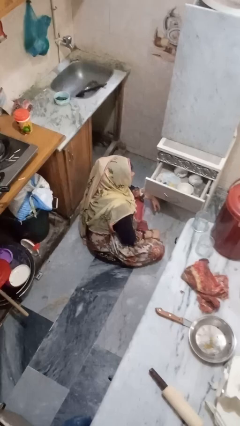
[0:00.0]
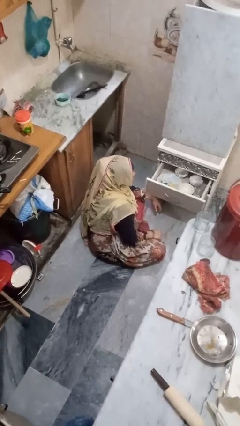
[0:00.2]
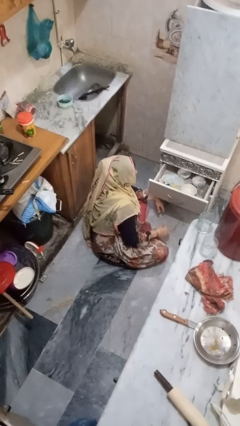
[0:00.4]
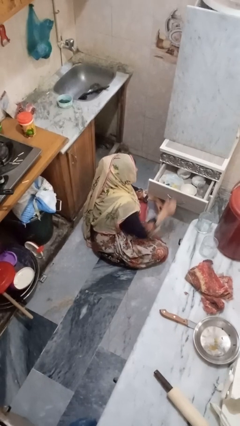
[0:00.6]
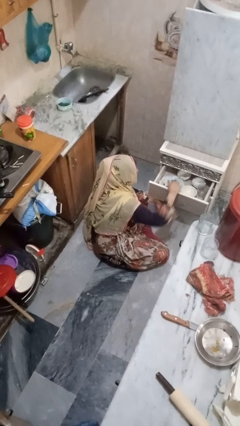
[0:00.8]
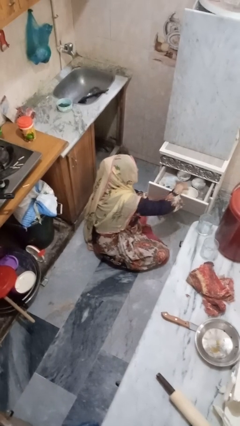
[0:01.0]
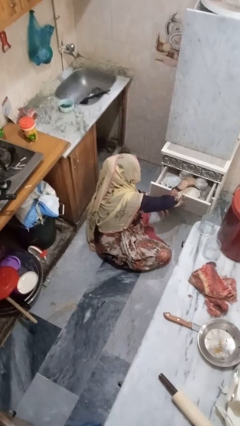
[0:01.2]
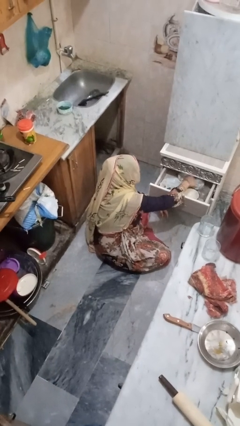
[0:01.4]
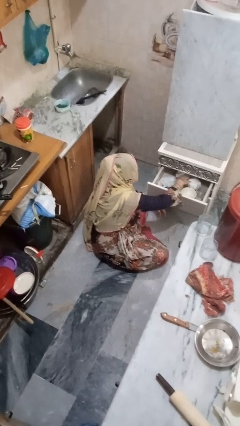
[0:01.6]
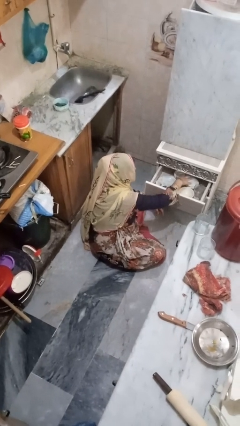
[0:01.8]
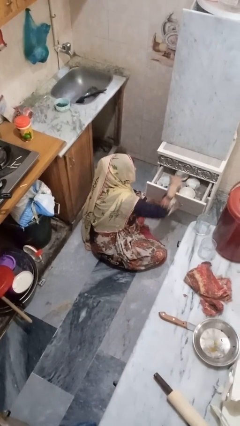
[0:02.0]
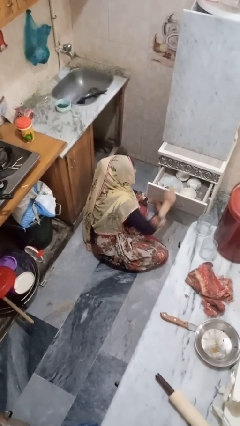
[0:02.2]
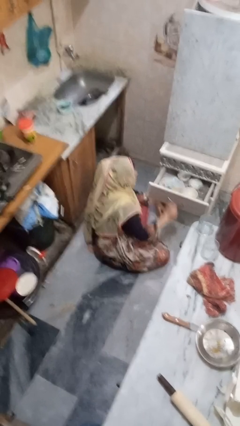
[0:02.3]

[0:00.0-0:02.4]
person searches in kitchen drawer

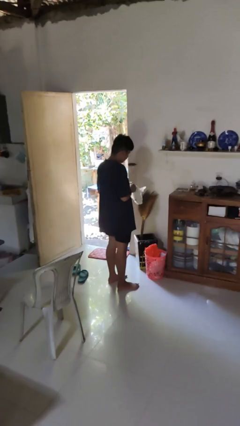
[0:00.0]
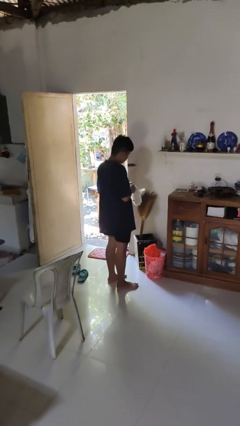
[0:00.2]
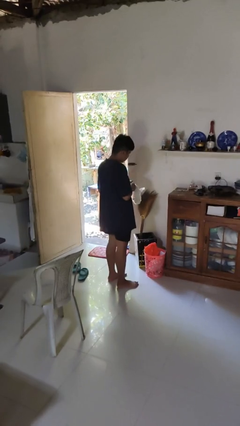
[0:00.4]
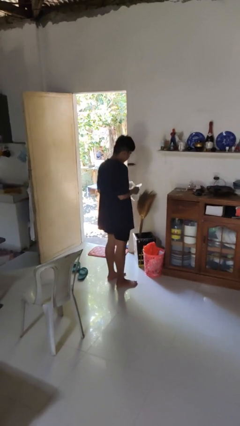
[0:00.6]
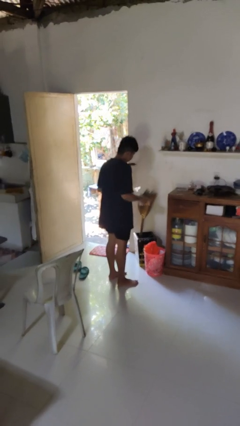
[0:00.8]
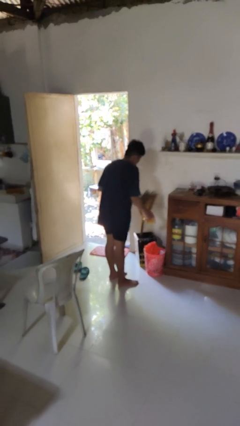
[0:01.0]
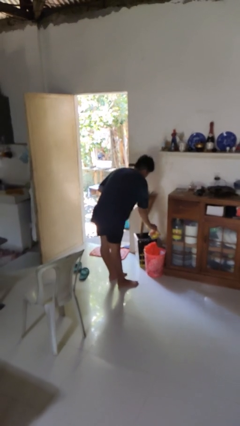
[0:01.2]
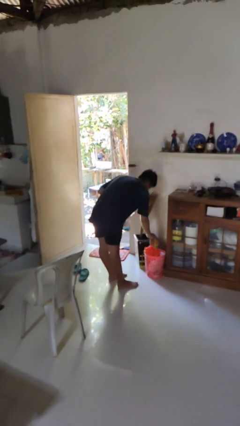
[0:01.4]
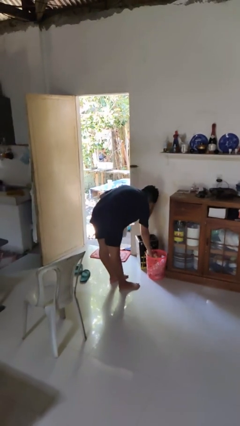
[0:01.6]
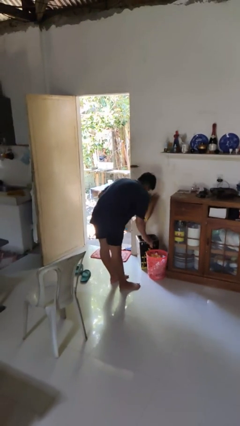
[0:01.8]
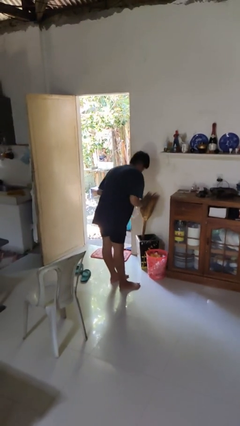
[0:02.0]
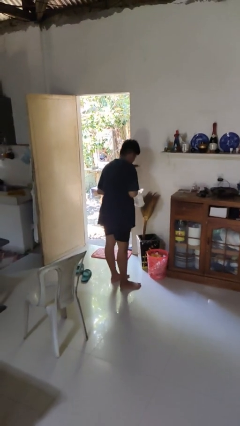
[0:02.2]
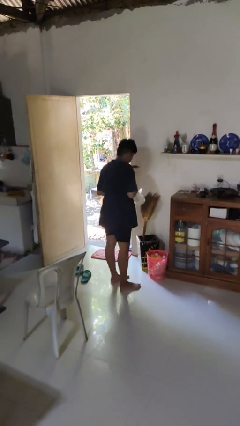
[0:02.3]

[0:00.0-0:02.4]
person discards trash

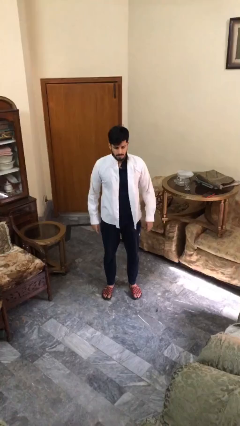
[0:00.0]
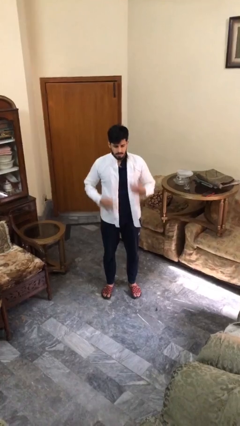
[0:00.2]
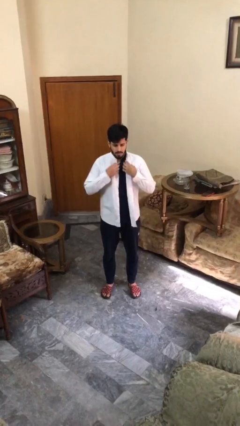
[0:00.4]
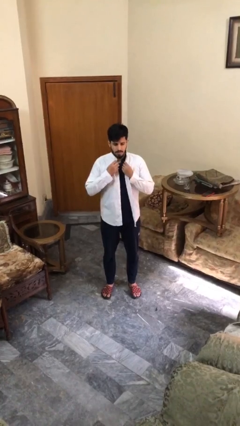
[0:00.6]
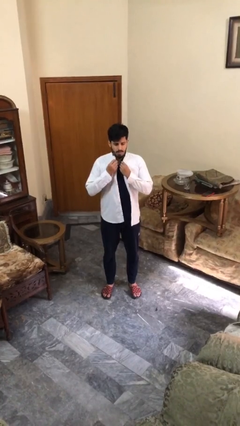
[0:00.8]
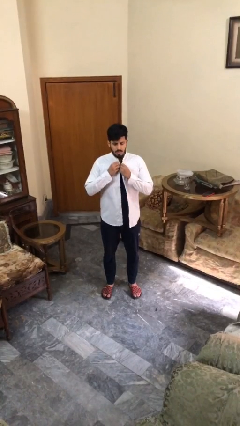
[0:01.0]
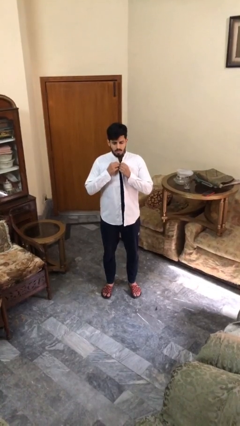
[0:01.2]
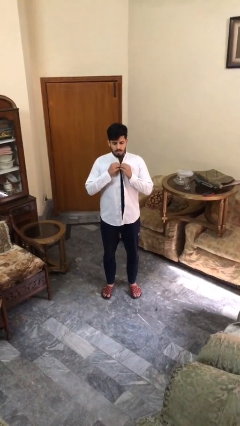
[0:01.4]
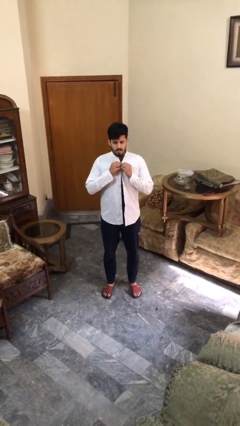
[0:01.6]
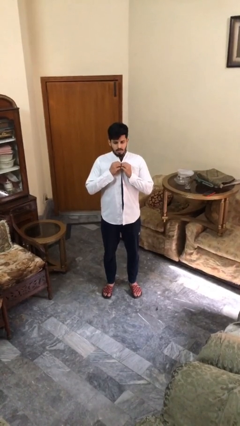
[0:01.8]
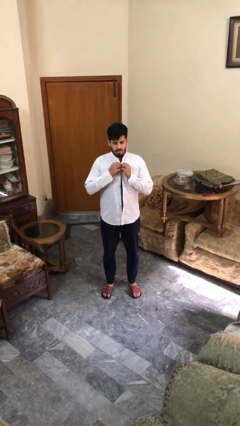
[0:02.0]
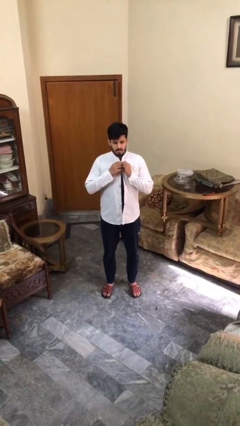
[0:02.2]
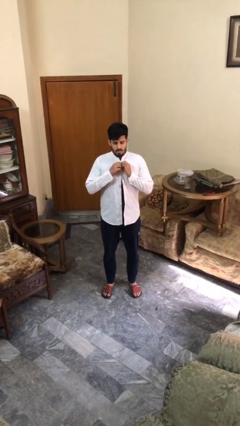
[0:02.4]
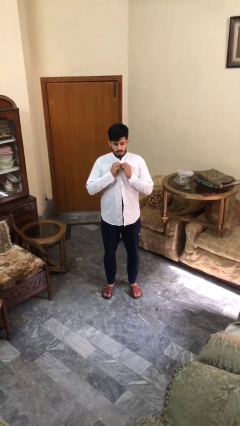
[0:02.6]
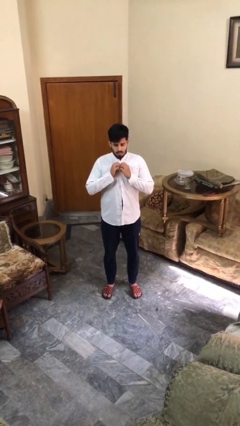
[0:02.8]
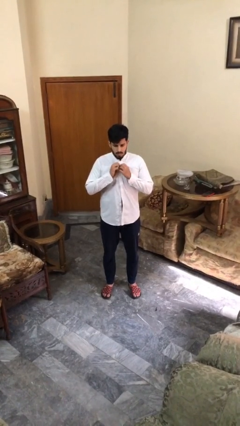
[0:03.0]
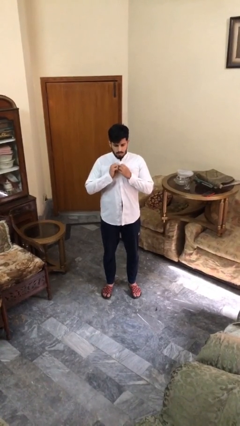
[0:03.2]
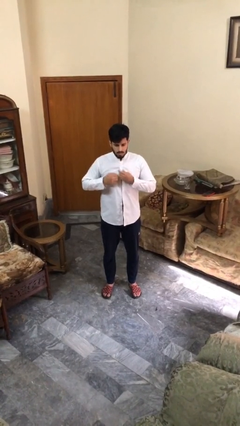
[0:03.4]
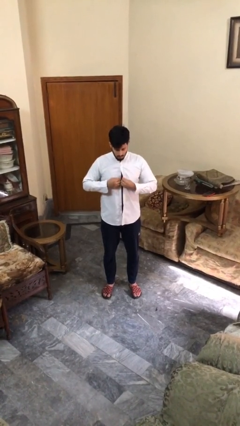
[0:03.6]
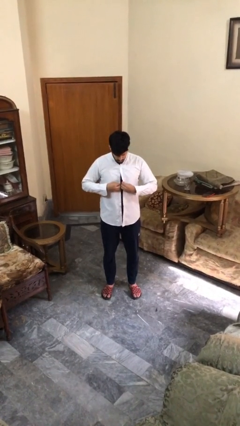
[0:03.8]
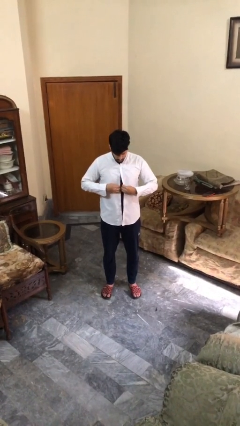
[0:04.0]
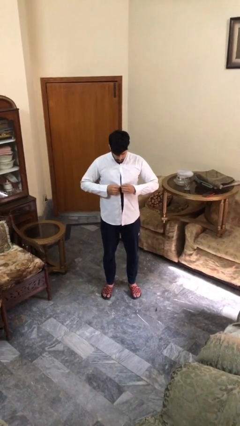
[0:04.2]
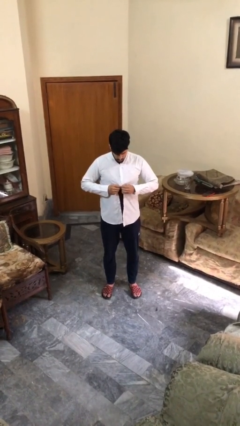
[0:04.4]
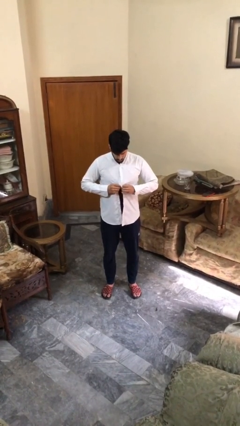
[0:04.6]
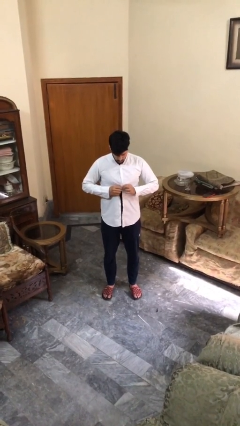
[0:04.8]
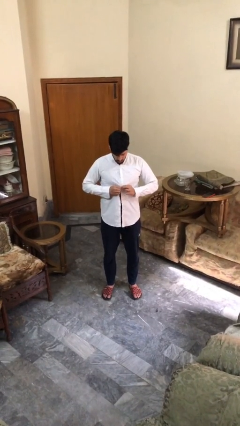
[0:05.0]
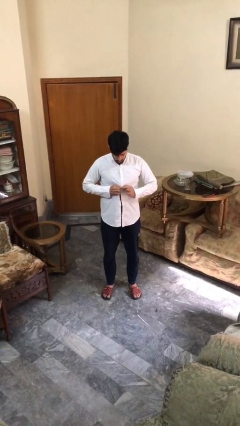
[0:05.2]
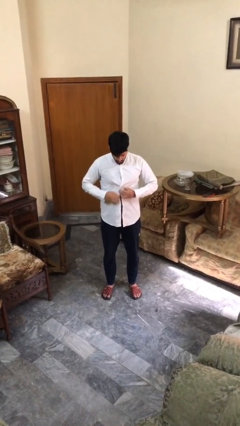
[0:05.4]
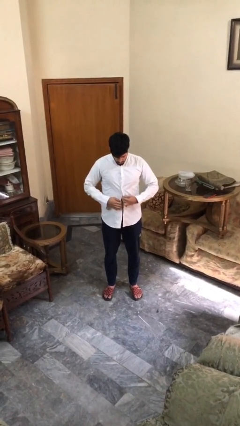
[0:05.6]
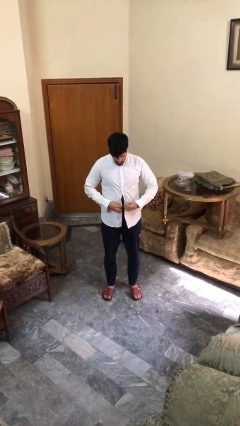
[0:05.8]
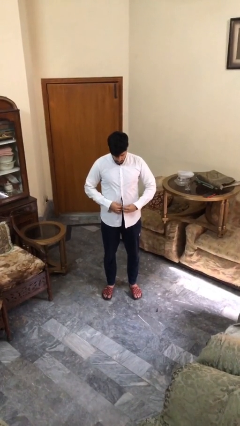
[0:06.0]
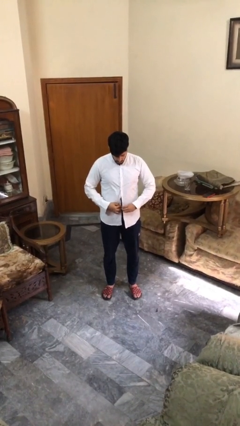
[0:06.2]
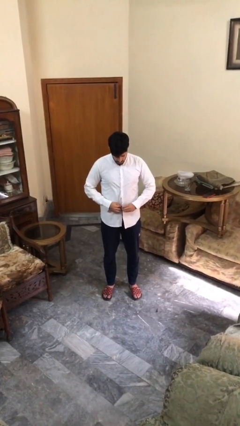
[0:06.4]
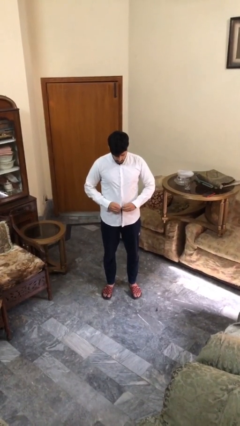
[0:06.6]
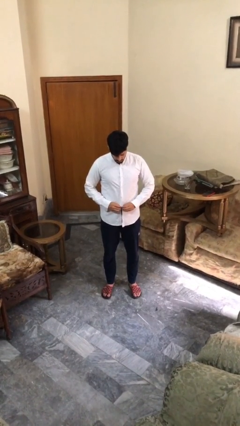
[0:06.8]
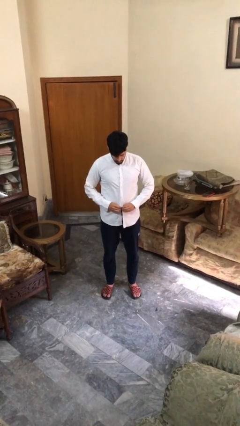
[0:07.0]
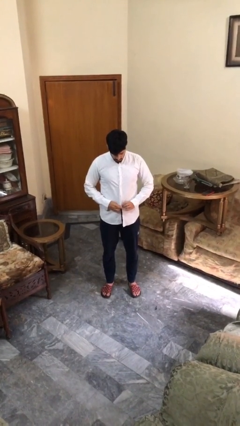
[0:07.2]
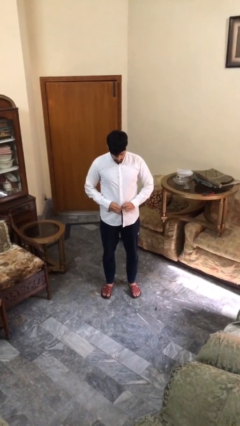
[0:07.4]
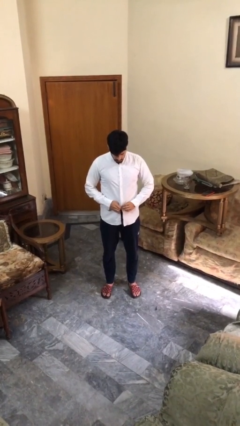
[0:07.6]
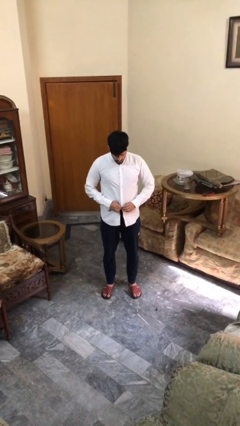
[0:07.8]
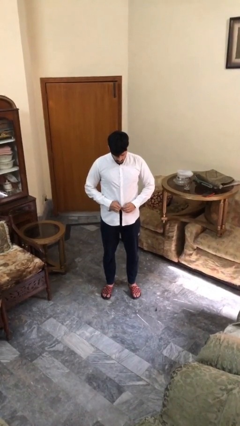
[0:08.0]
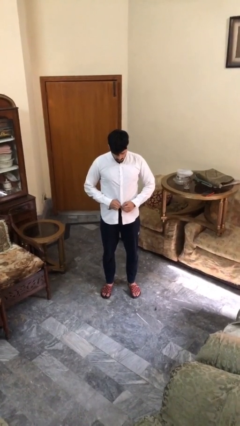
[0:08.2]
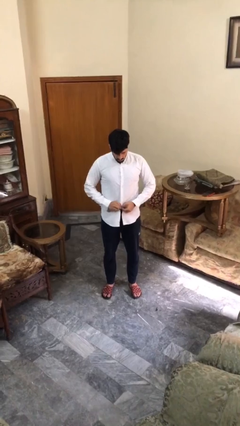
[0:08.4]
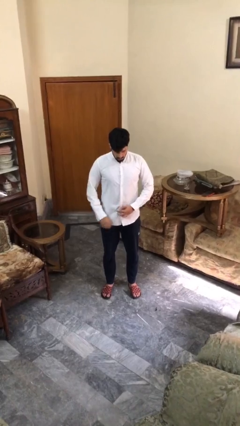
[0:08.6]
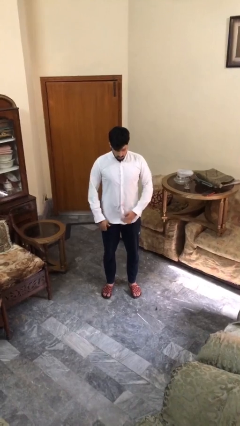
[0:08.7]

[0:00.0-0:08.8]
person buttons shirt

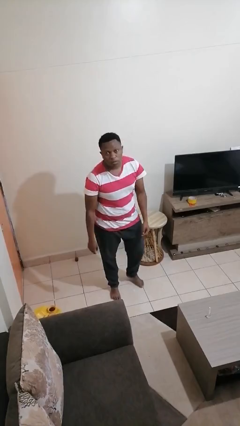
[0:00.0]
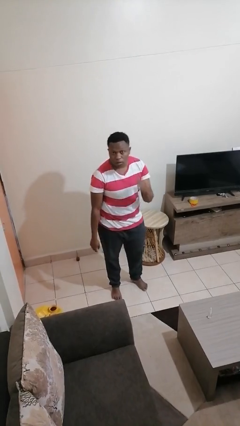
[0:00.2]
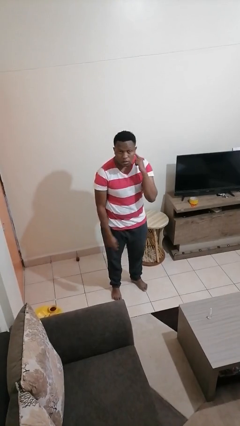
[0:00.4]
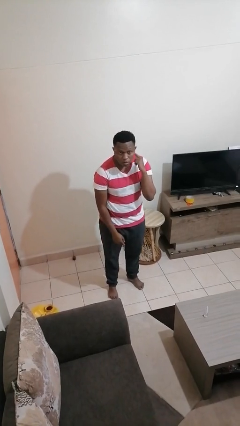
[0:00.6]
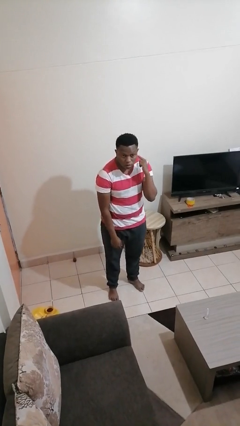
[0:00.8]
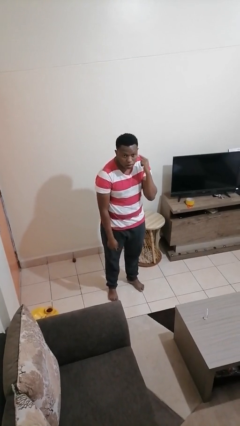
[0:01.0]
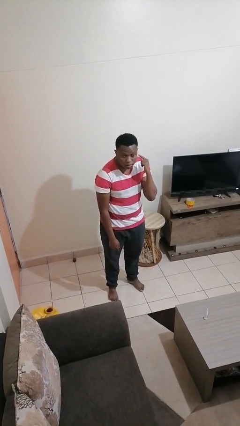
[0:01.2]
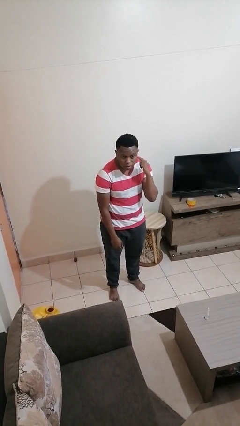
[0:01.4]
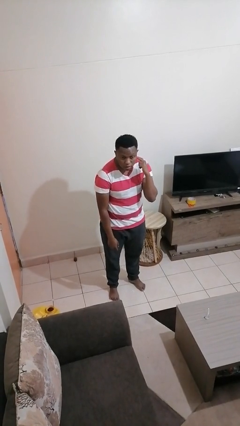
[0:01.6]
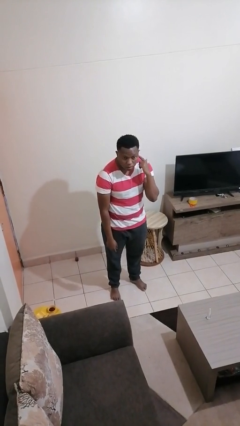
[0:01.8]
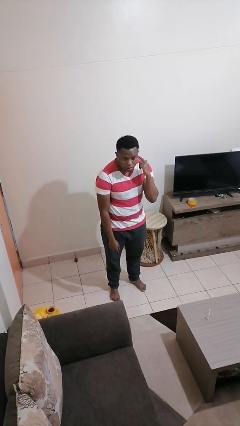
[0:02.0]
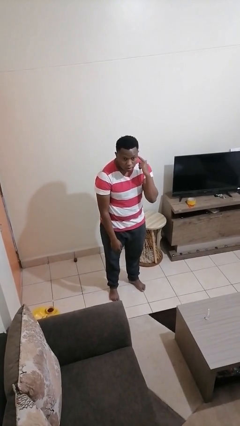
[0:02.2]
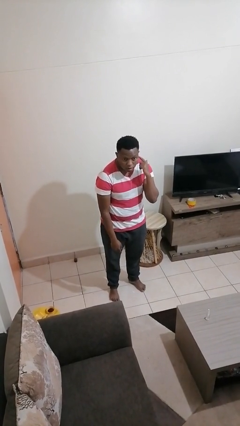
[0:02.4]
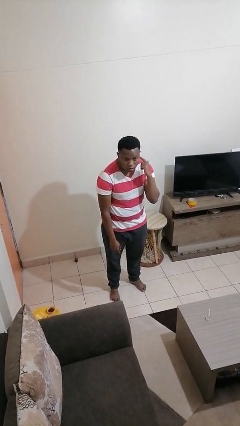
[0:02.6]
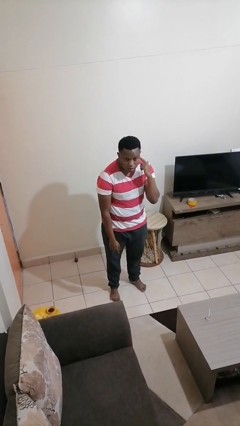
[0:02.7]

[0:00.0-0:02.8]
person gestures listen closely

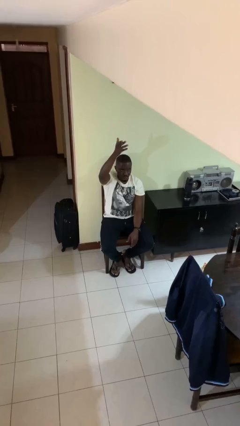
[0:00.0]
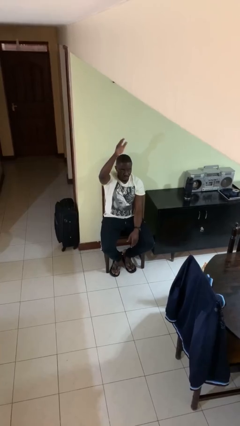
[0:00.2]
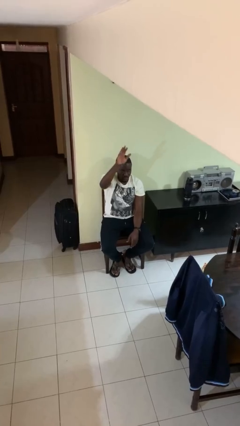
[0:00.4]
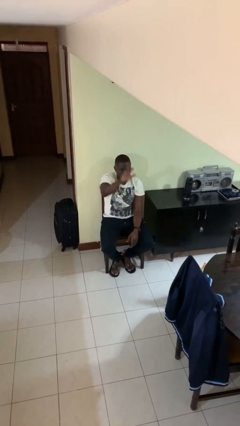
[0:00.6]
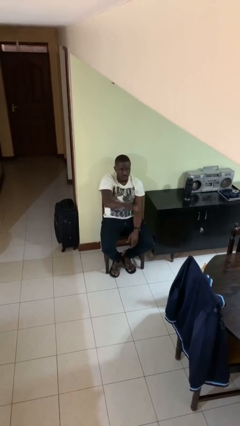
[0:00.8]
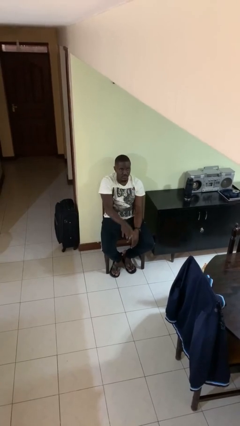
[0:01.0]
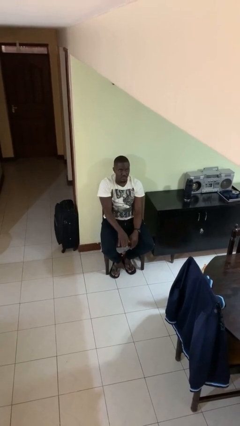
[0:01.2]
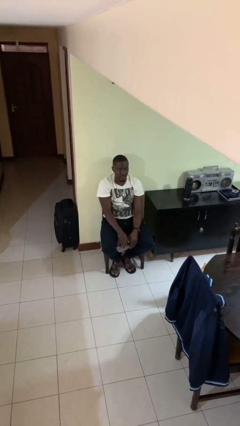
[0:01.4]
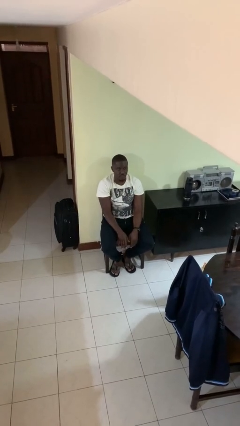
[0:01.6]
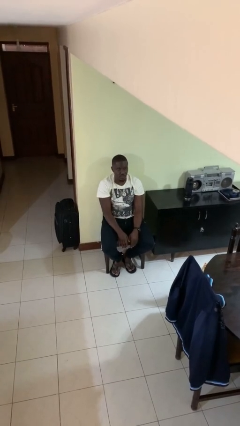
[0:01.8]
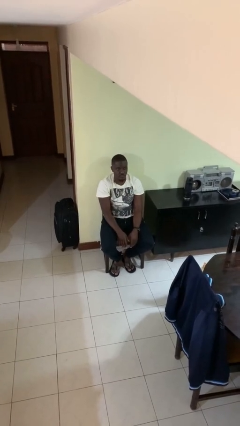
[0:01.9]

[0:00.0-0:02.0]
person gestures swipe down
